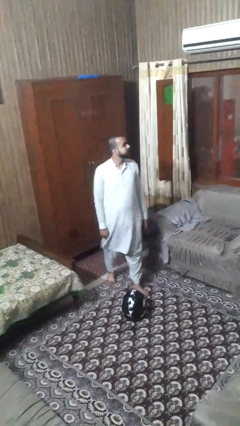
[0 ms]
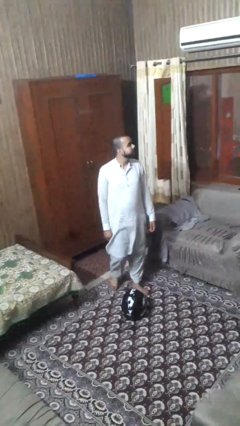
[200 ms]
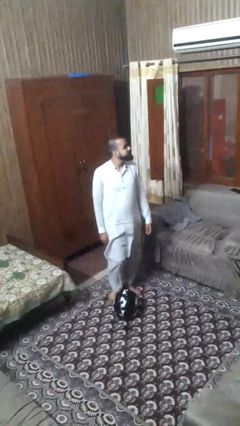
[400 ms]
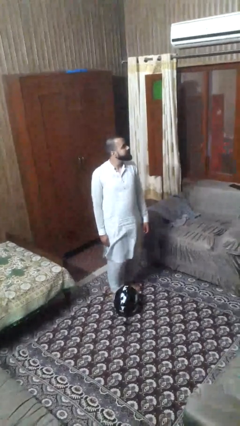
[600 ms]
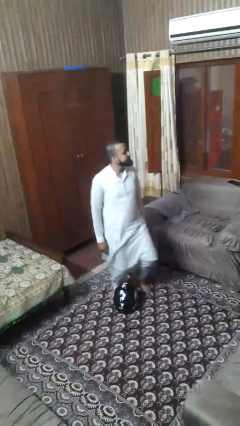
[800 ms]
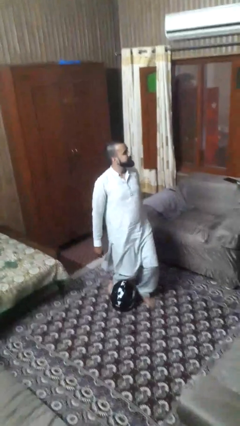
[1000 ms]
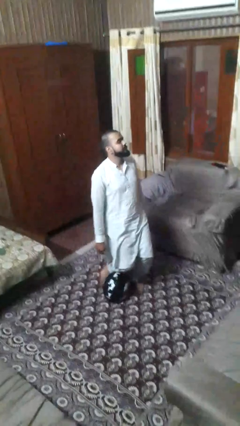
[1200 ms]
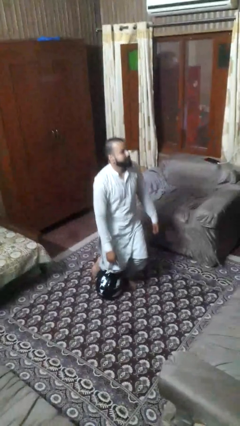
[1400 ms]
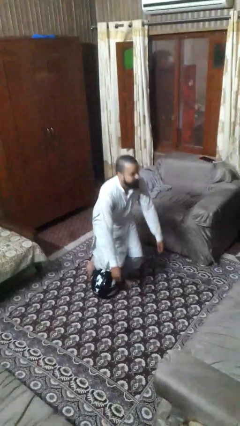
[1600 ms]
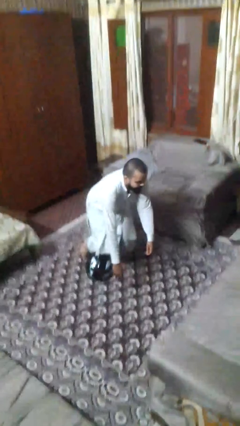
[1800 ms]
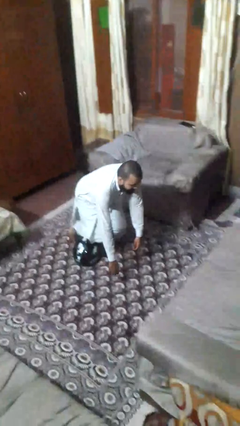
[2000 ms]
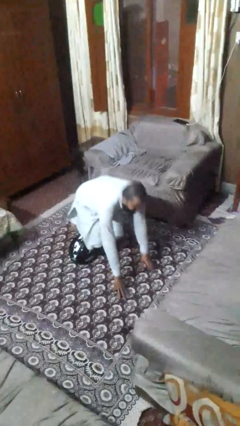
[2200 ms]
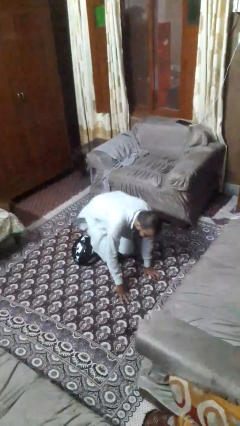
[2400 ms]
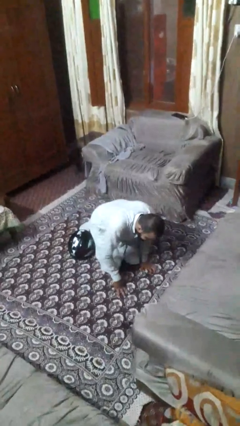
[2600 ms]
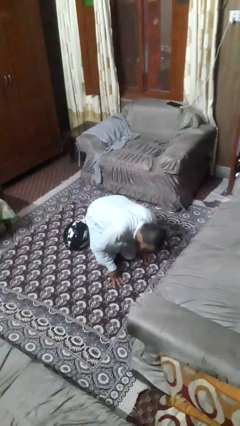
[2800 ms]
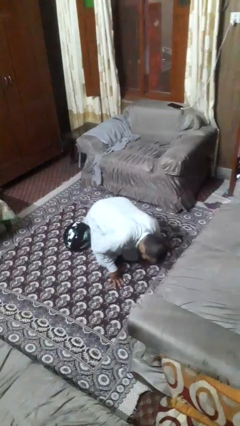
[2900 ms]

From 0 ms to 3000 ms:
person trips on object on floor

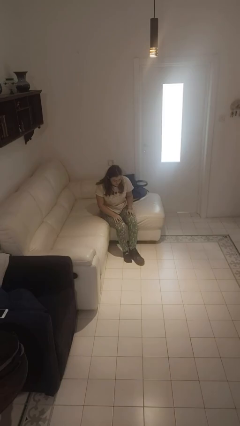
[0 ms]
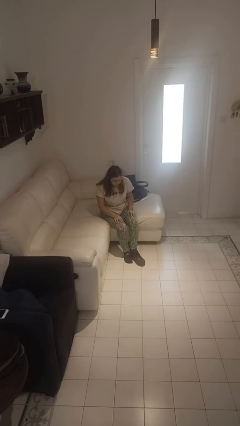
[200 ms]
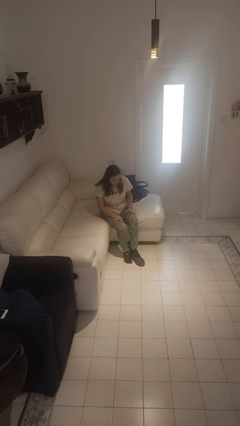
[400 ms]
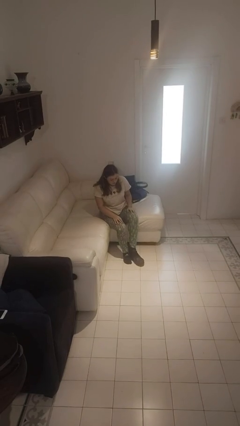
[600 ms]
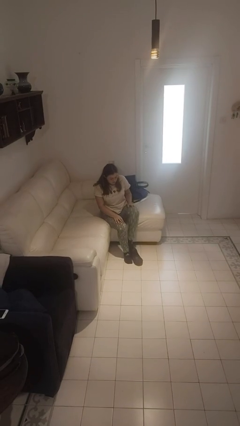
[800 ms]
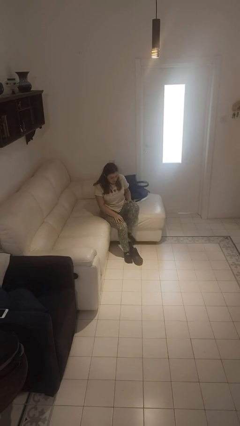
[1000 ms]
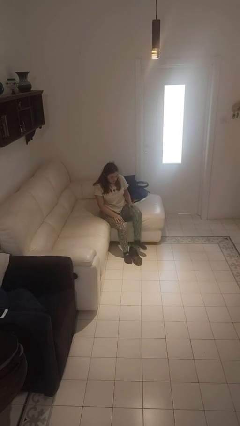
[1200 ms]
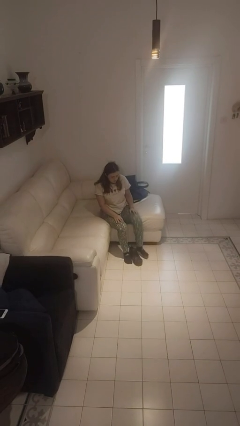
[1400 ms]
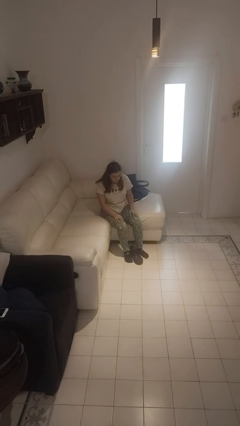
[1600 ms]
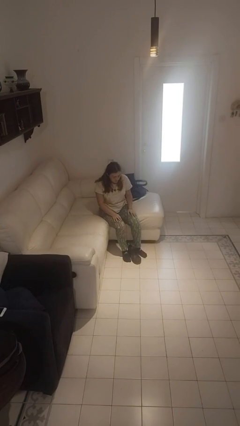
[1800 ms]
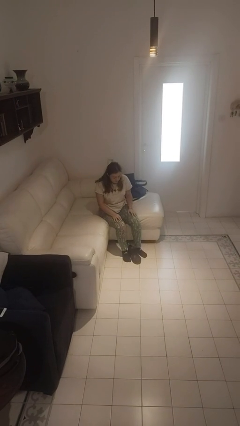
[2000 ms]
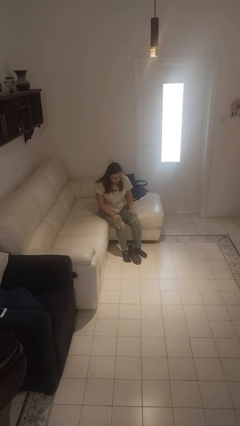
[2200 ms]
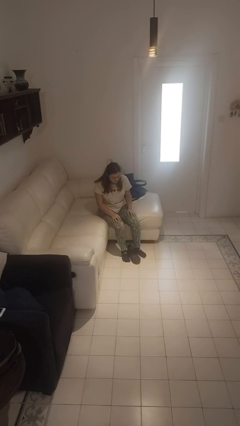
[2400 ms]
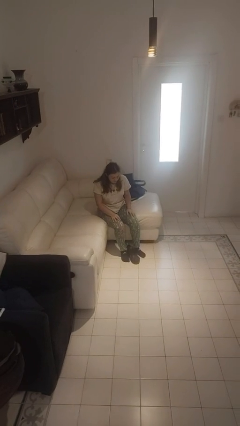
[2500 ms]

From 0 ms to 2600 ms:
person takes off shoes

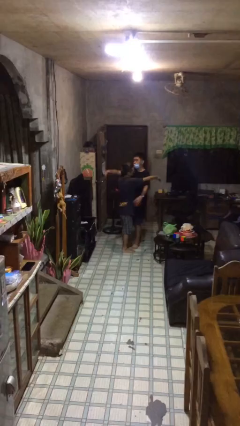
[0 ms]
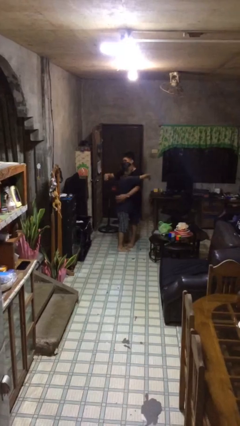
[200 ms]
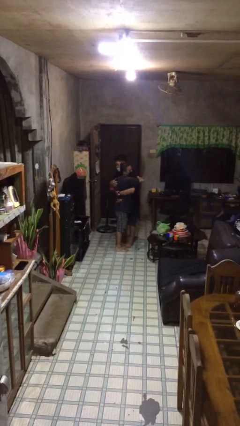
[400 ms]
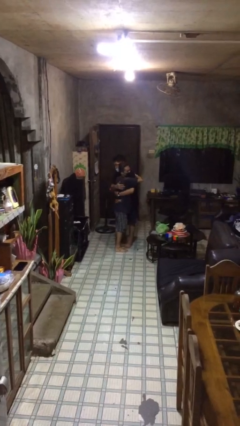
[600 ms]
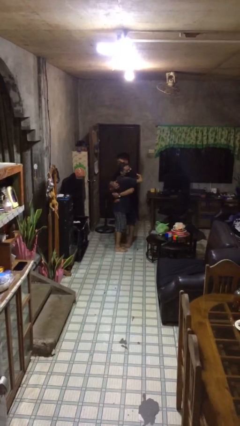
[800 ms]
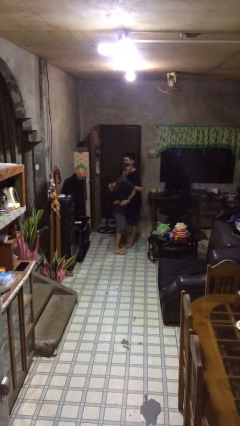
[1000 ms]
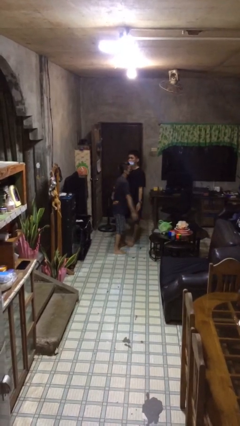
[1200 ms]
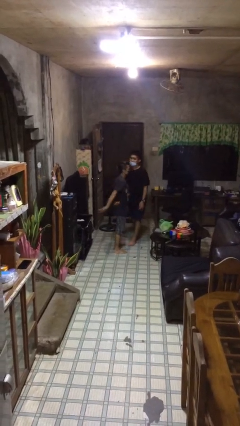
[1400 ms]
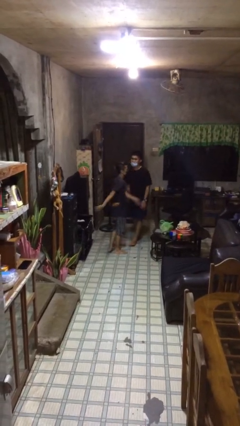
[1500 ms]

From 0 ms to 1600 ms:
person embraces person

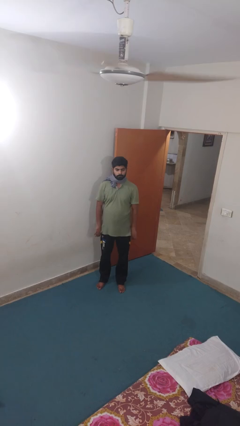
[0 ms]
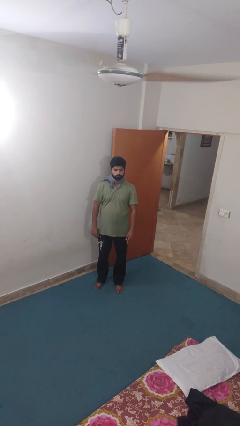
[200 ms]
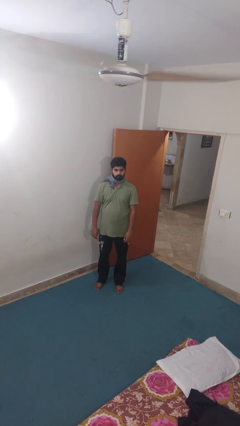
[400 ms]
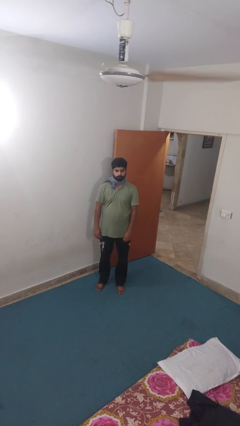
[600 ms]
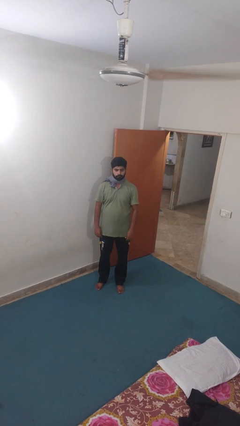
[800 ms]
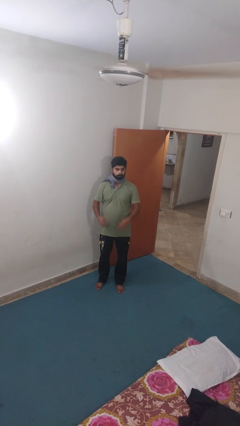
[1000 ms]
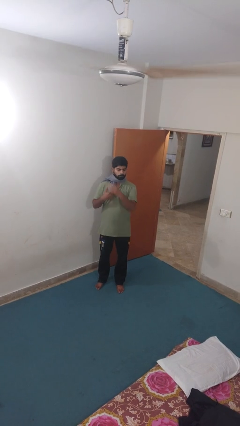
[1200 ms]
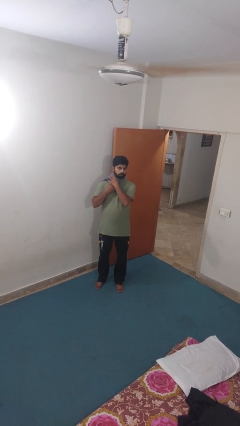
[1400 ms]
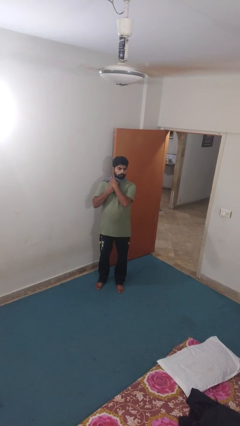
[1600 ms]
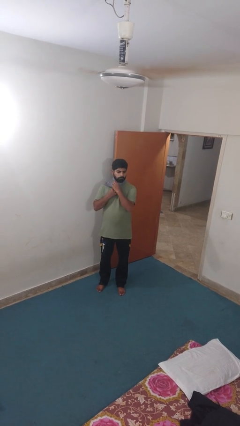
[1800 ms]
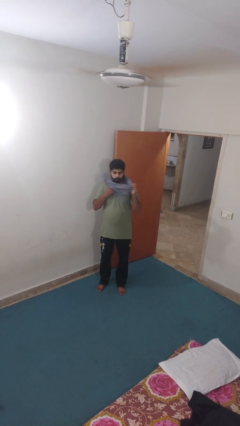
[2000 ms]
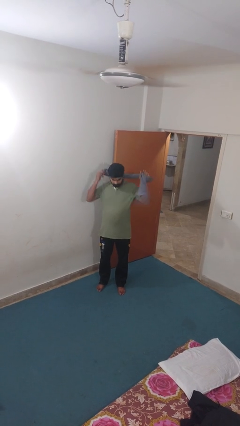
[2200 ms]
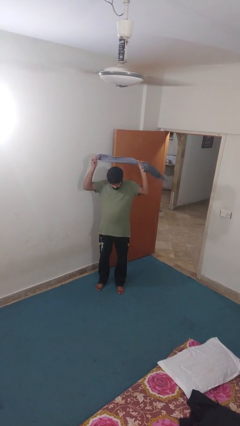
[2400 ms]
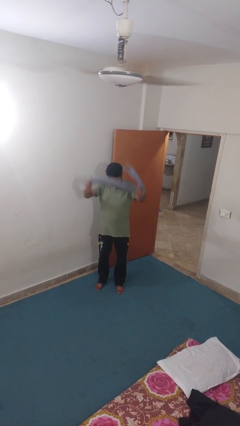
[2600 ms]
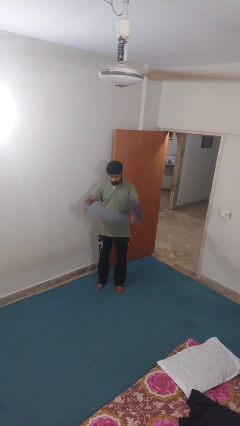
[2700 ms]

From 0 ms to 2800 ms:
person takes off scarf

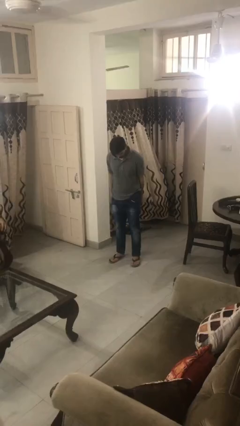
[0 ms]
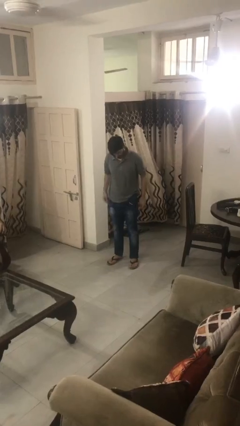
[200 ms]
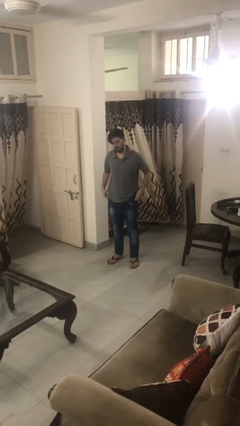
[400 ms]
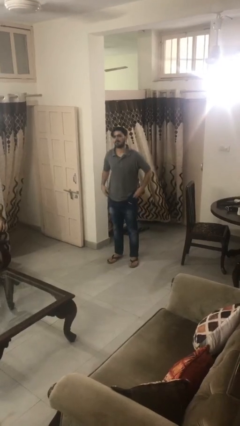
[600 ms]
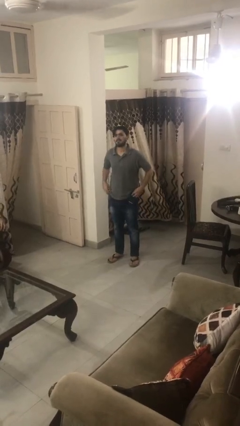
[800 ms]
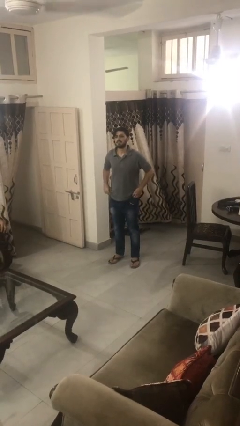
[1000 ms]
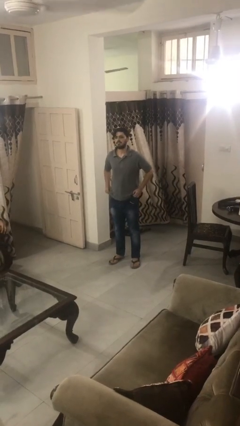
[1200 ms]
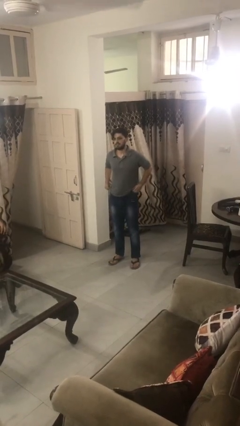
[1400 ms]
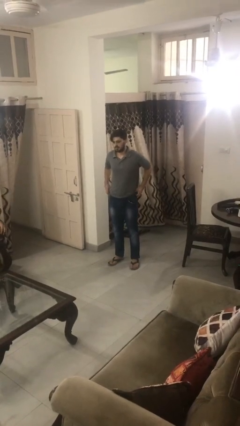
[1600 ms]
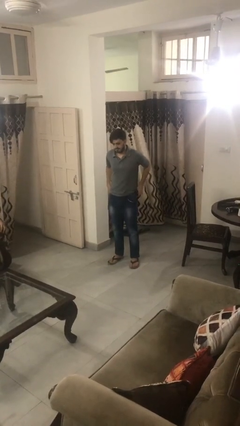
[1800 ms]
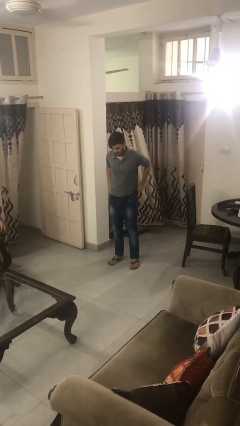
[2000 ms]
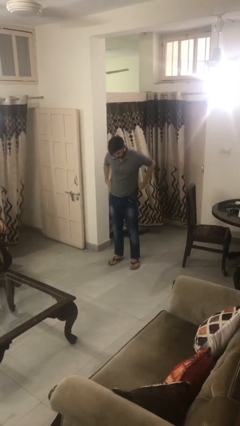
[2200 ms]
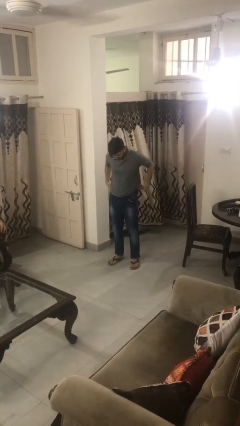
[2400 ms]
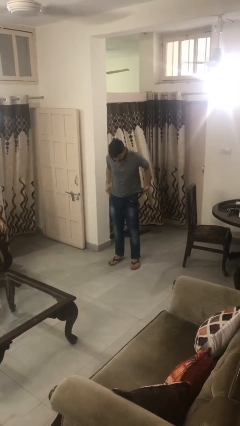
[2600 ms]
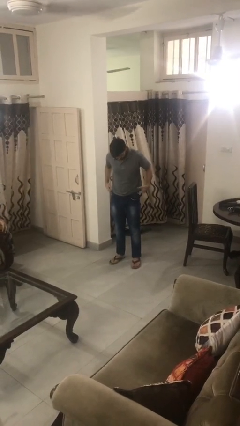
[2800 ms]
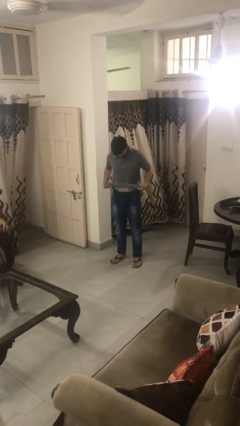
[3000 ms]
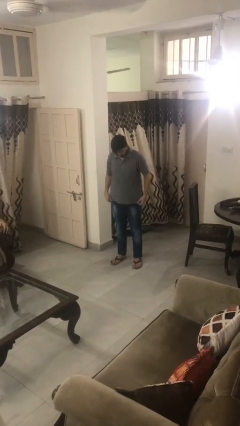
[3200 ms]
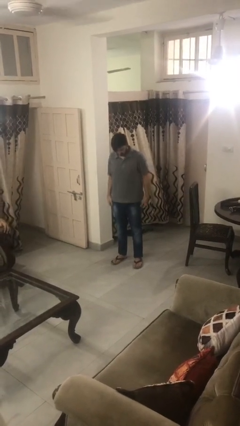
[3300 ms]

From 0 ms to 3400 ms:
person hikes up pants

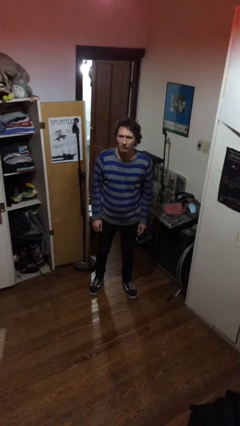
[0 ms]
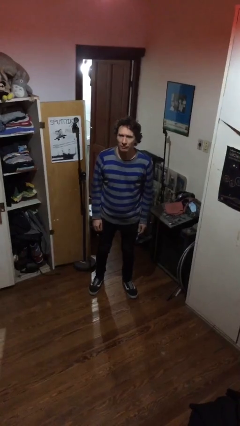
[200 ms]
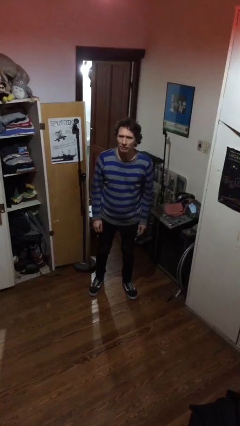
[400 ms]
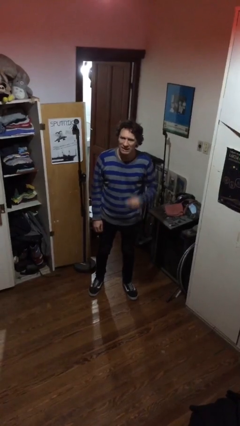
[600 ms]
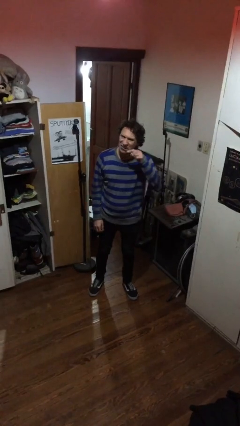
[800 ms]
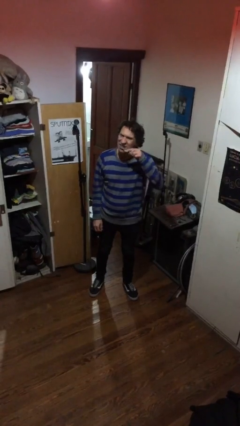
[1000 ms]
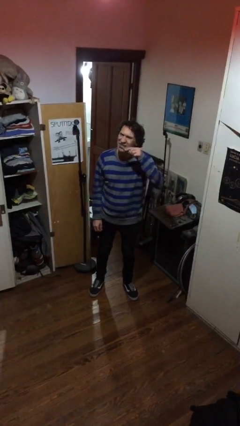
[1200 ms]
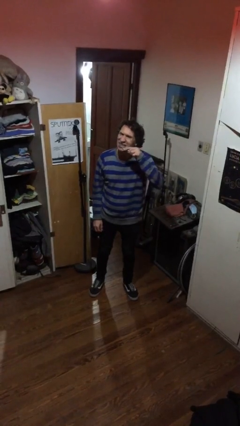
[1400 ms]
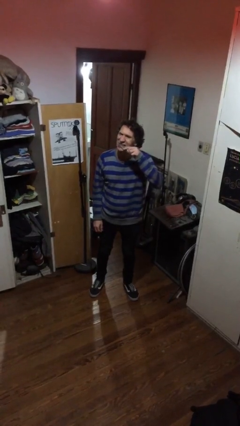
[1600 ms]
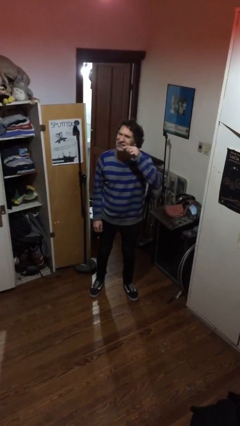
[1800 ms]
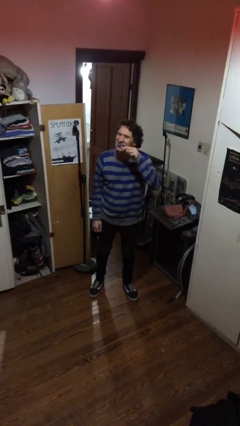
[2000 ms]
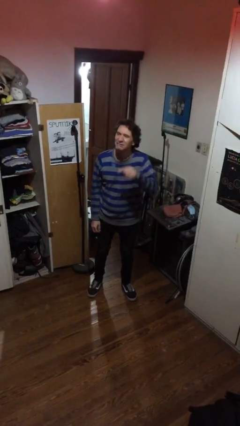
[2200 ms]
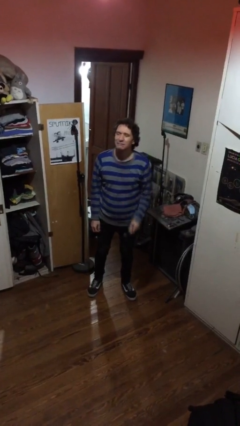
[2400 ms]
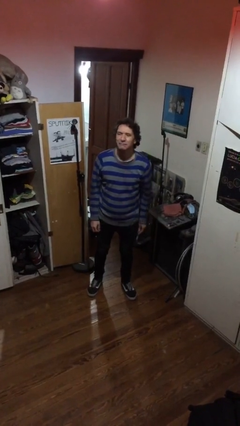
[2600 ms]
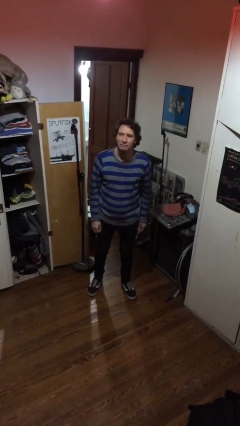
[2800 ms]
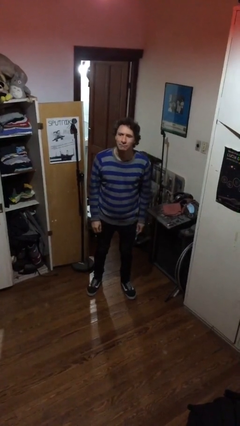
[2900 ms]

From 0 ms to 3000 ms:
person brushes teeth

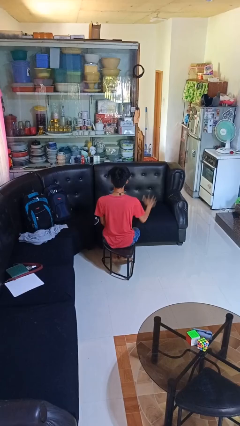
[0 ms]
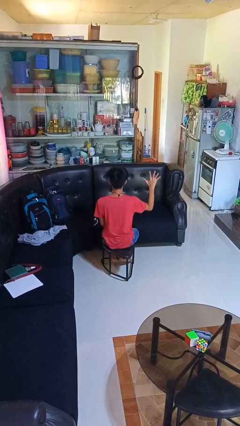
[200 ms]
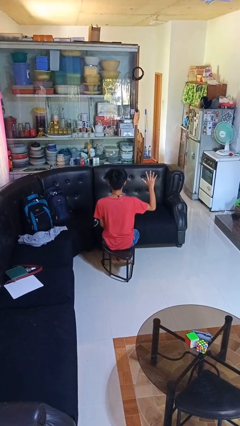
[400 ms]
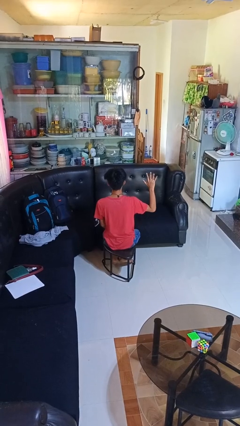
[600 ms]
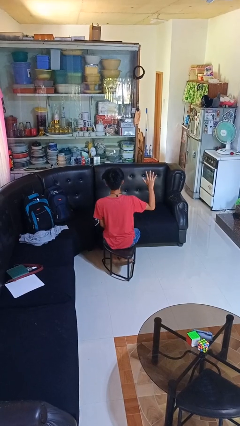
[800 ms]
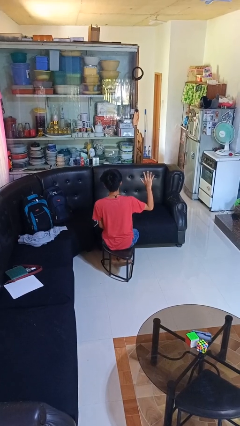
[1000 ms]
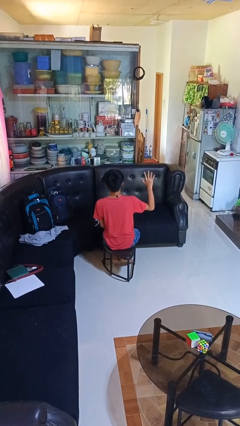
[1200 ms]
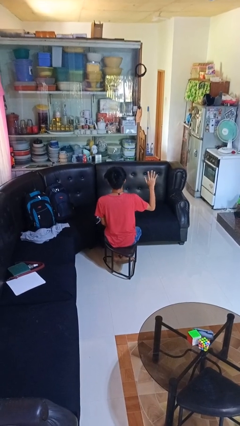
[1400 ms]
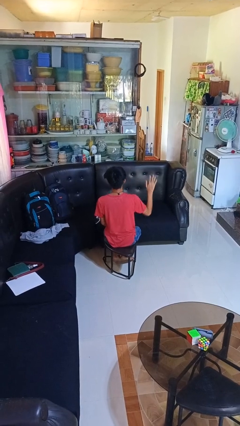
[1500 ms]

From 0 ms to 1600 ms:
person gestures number five
